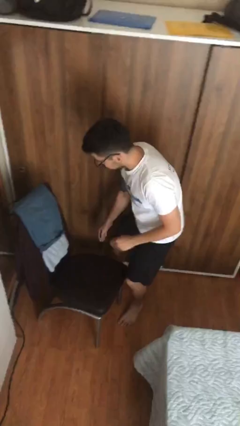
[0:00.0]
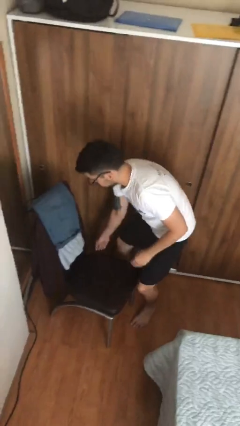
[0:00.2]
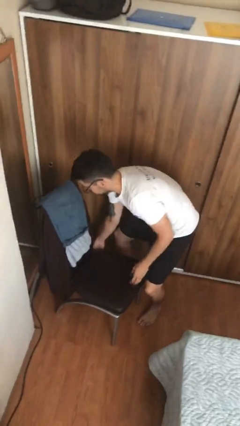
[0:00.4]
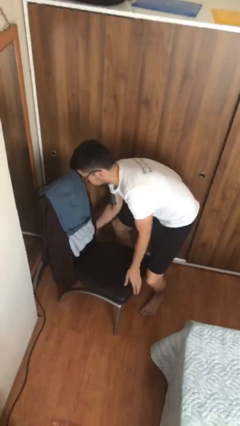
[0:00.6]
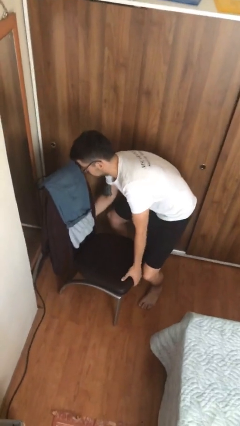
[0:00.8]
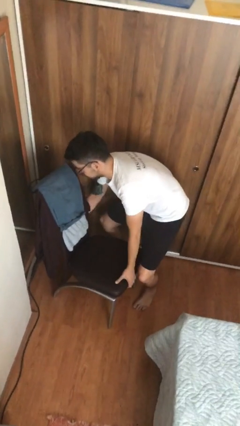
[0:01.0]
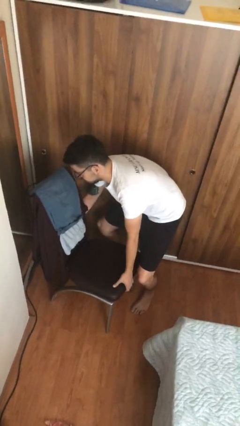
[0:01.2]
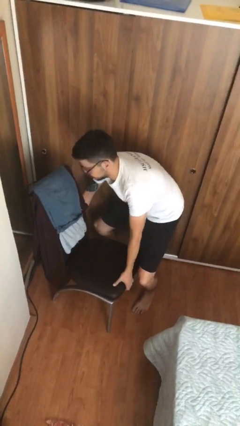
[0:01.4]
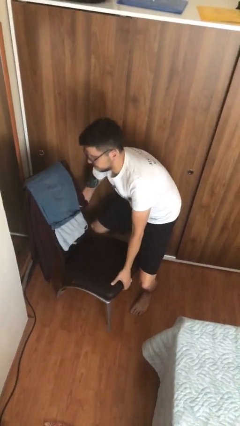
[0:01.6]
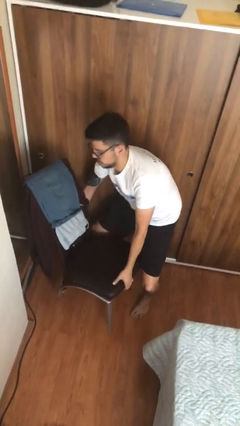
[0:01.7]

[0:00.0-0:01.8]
person picks up object from floor

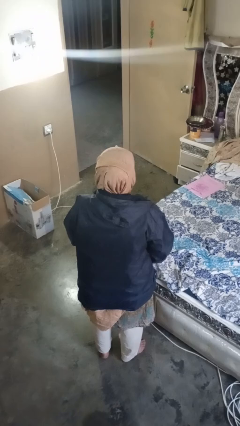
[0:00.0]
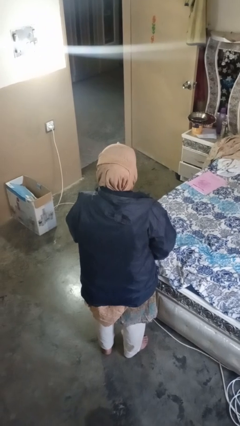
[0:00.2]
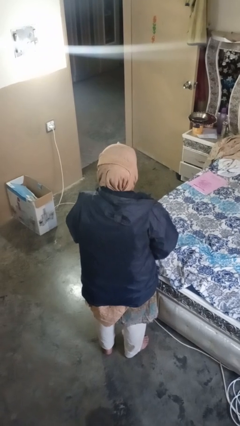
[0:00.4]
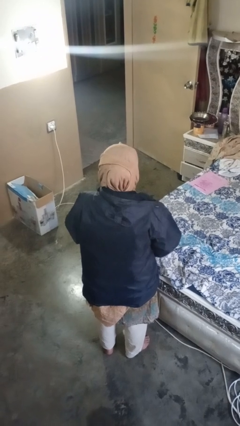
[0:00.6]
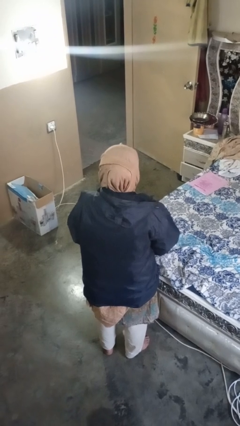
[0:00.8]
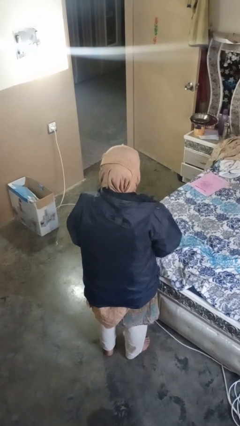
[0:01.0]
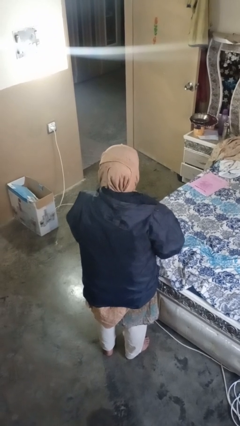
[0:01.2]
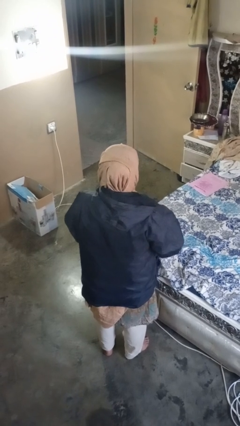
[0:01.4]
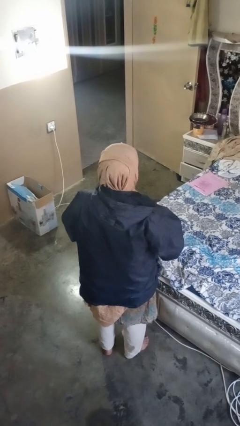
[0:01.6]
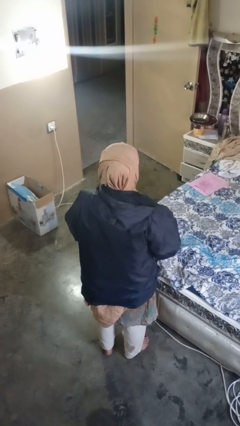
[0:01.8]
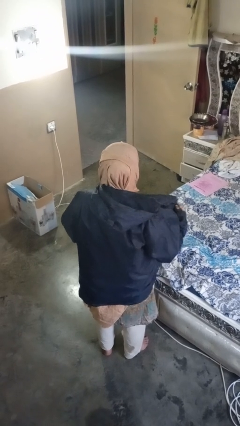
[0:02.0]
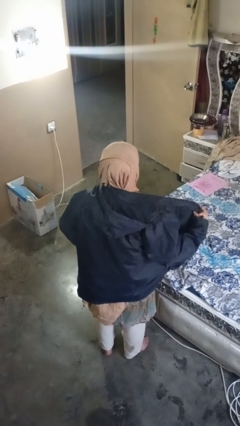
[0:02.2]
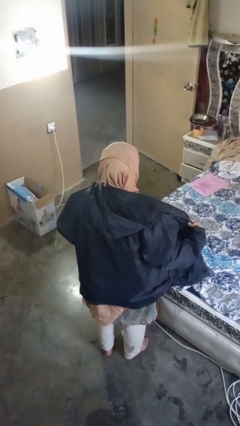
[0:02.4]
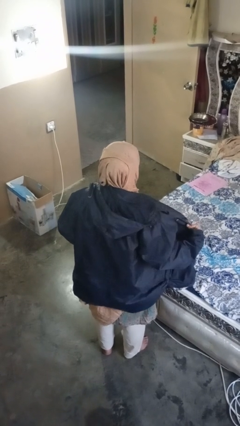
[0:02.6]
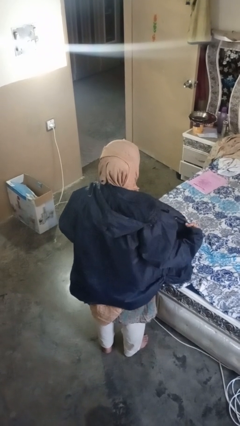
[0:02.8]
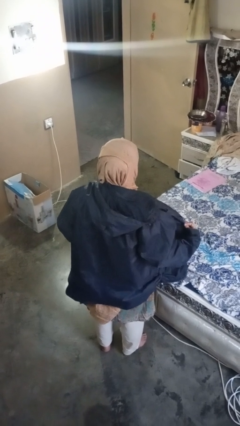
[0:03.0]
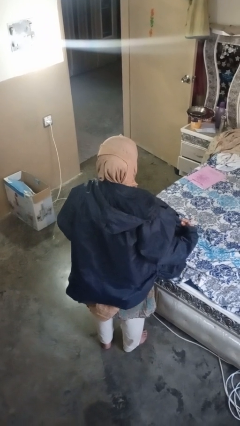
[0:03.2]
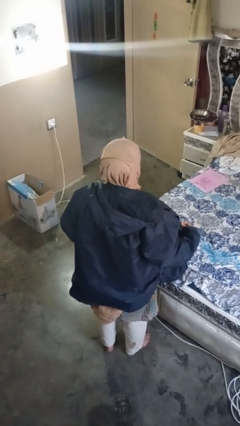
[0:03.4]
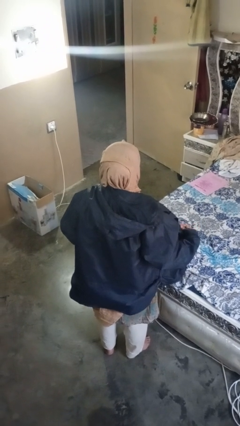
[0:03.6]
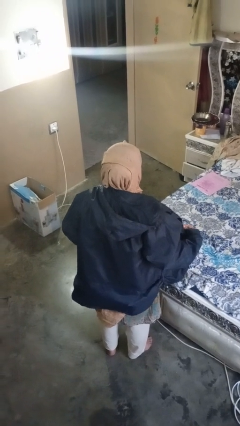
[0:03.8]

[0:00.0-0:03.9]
person unzips jacket

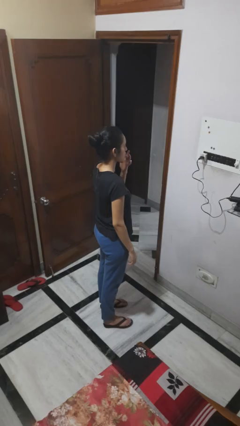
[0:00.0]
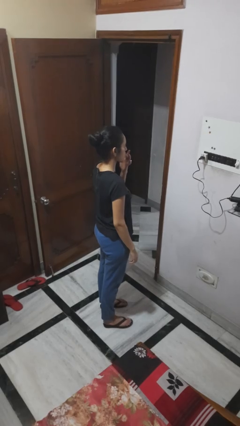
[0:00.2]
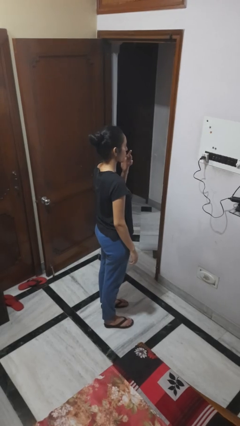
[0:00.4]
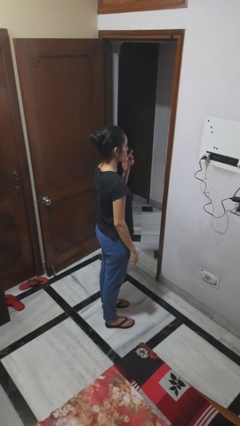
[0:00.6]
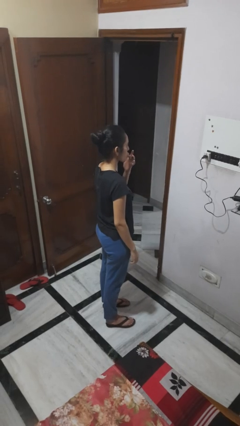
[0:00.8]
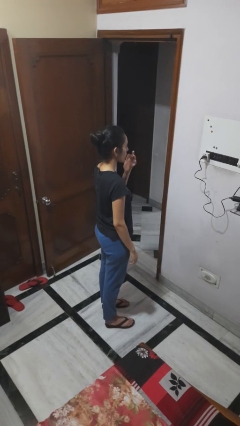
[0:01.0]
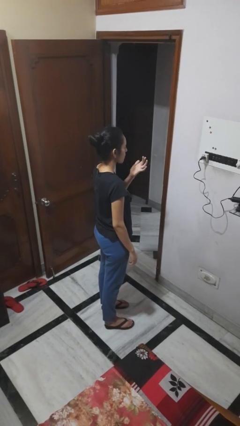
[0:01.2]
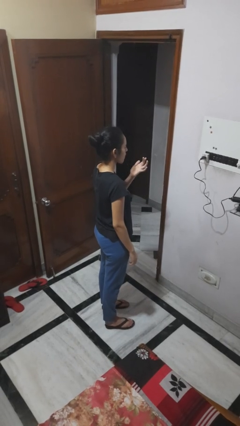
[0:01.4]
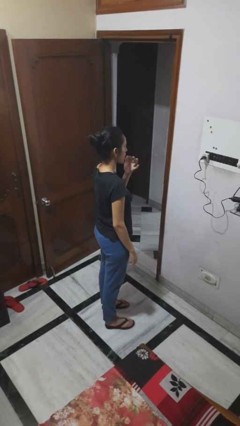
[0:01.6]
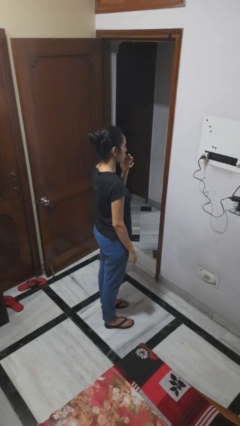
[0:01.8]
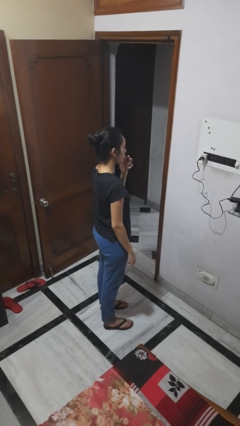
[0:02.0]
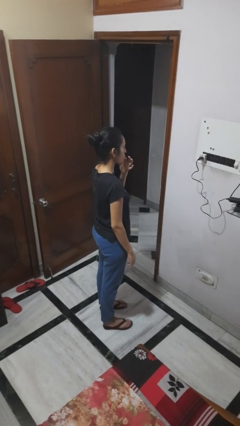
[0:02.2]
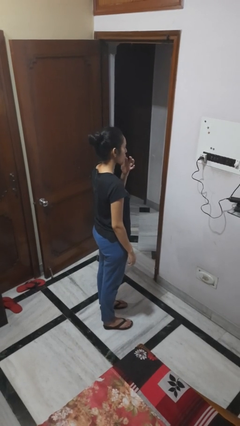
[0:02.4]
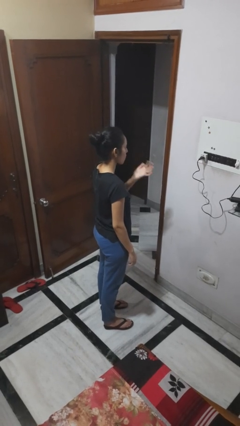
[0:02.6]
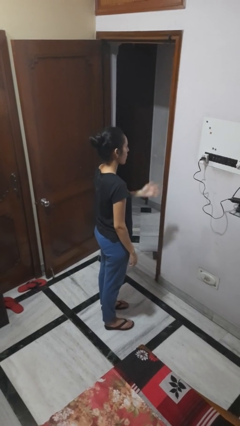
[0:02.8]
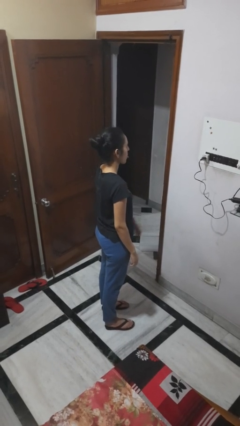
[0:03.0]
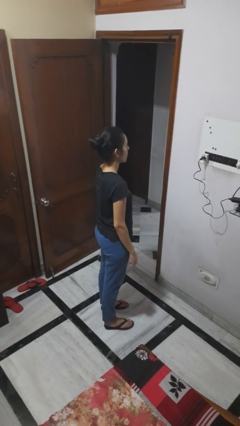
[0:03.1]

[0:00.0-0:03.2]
person licks fingers

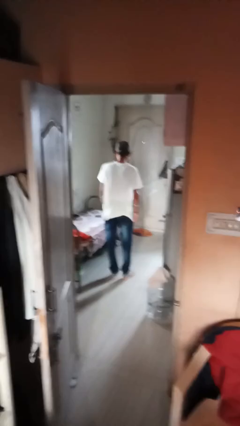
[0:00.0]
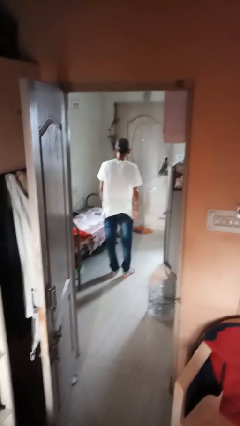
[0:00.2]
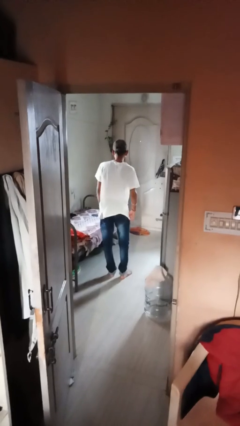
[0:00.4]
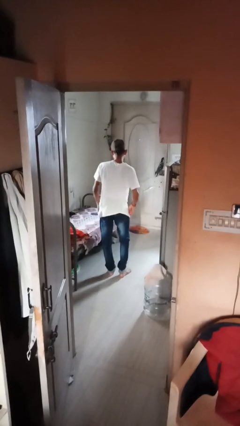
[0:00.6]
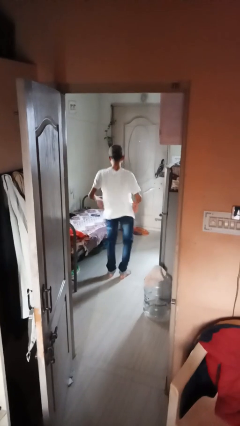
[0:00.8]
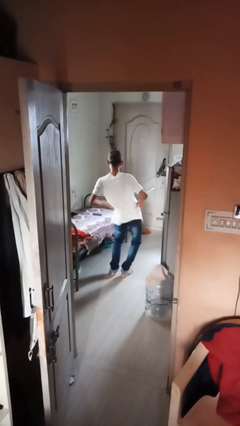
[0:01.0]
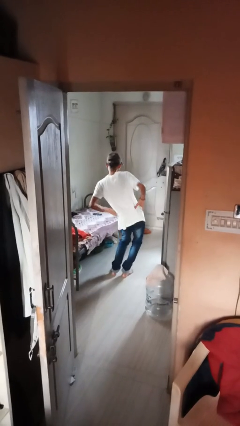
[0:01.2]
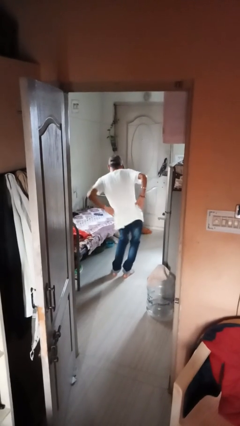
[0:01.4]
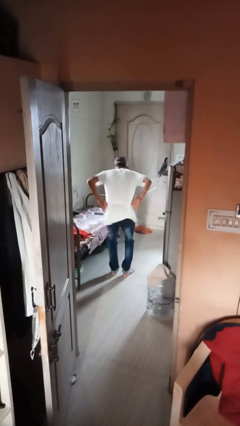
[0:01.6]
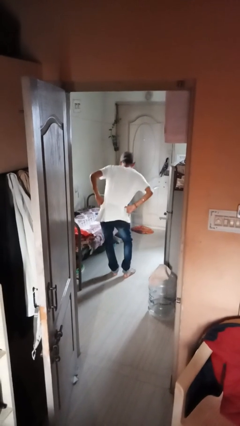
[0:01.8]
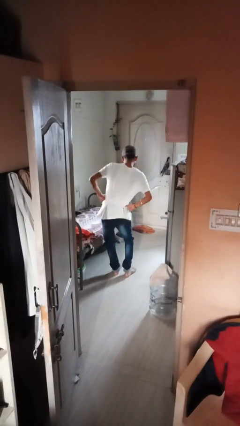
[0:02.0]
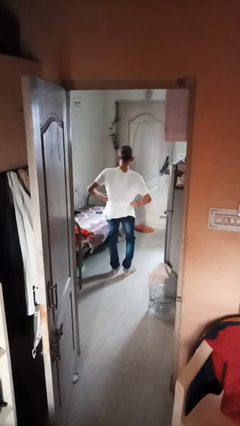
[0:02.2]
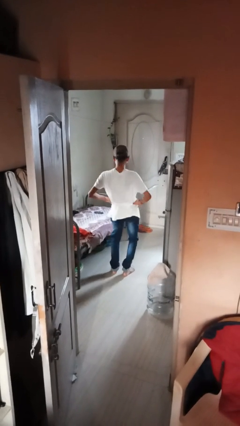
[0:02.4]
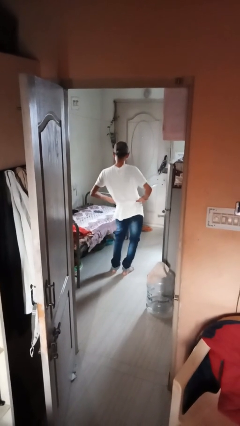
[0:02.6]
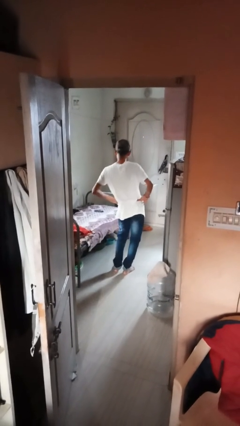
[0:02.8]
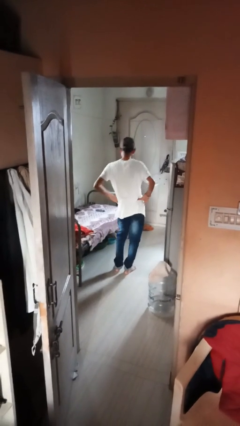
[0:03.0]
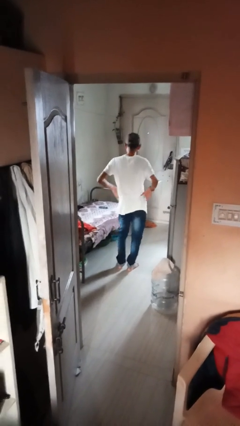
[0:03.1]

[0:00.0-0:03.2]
person wiggles hips

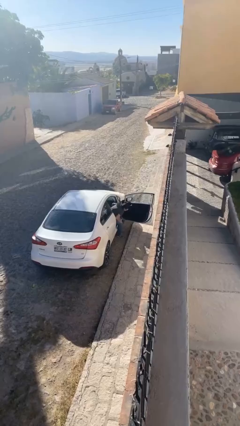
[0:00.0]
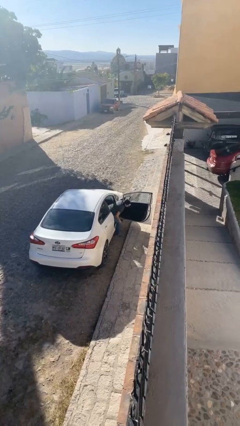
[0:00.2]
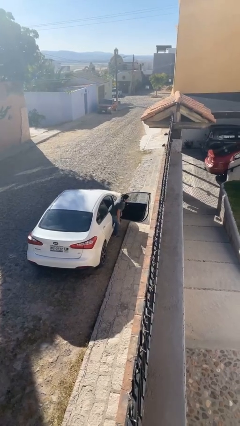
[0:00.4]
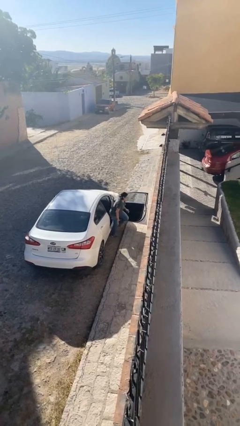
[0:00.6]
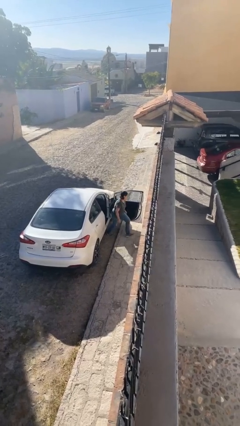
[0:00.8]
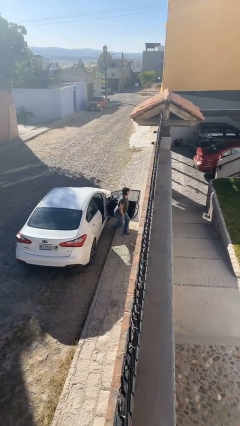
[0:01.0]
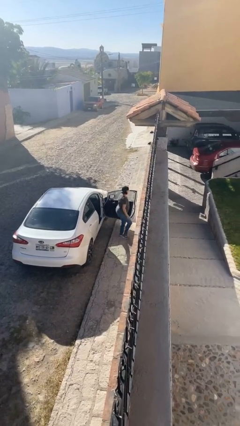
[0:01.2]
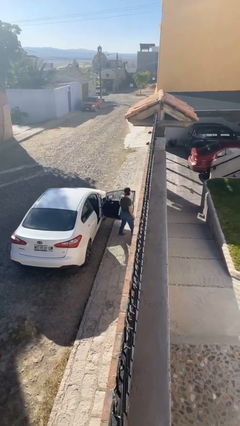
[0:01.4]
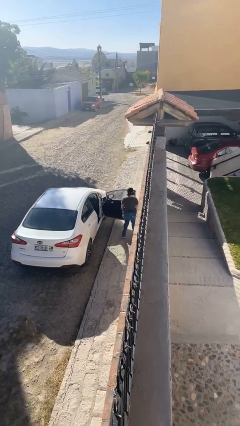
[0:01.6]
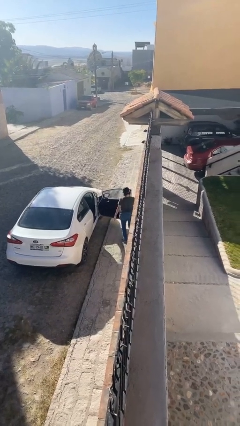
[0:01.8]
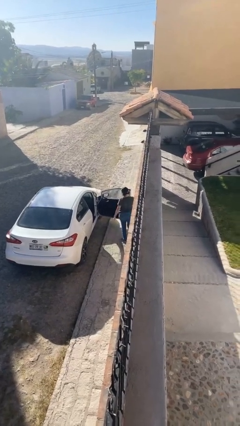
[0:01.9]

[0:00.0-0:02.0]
person exits car

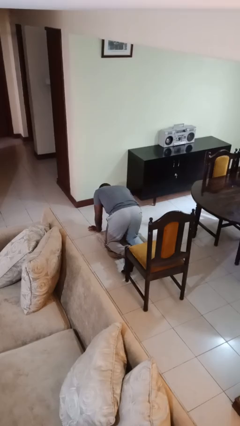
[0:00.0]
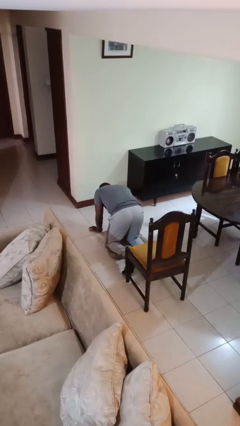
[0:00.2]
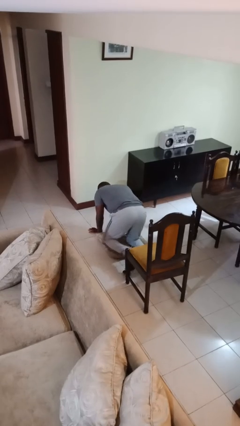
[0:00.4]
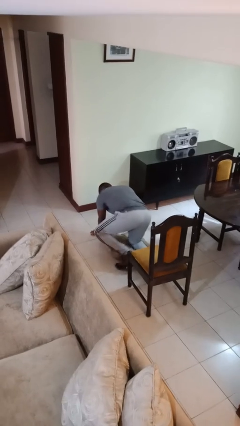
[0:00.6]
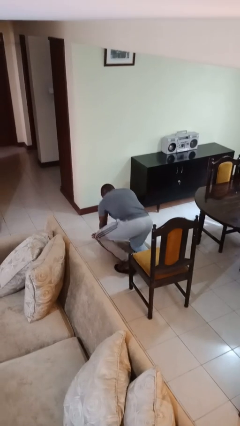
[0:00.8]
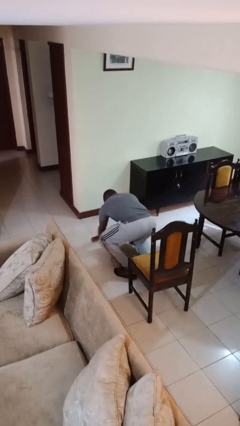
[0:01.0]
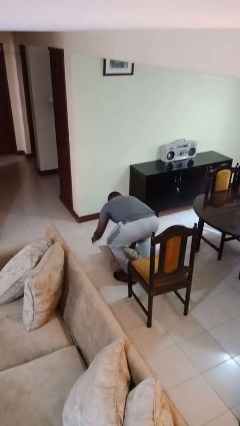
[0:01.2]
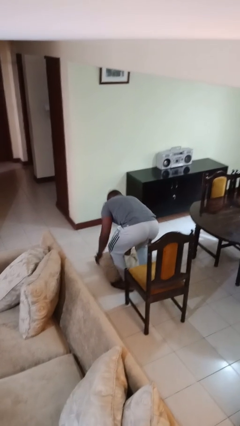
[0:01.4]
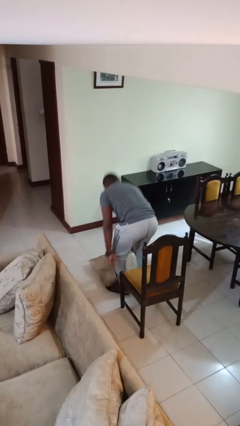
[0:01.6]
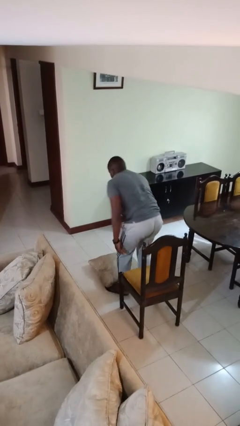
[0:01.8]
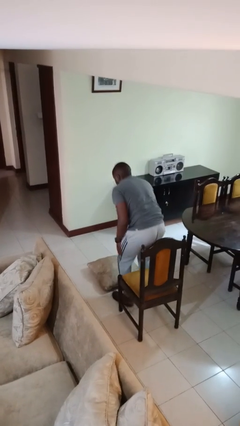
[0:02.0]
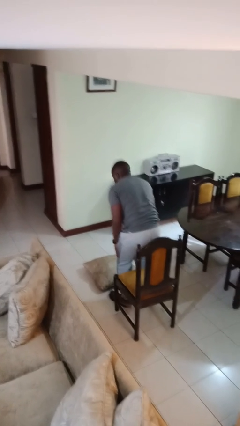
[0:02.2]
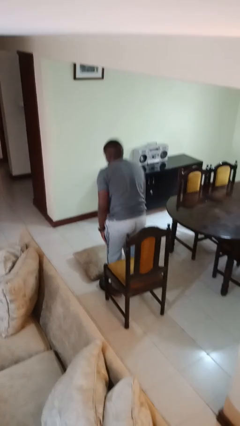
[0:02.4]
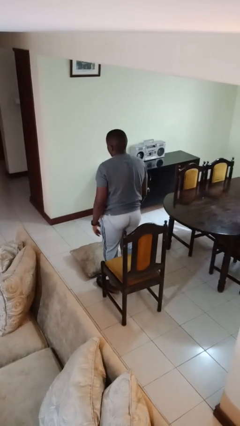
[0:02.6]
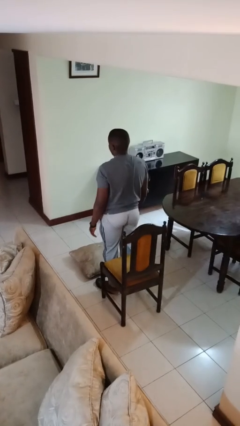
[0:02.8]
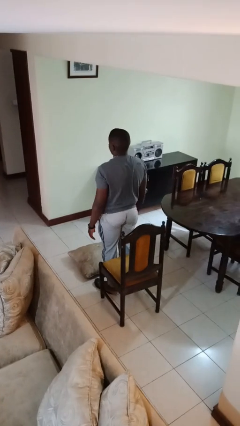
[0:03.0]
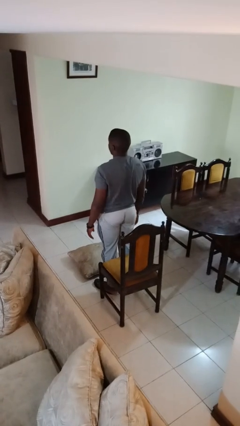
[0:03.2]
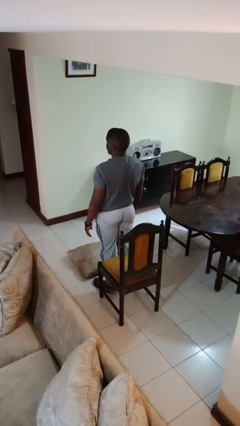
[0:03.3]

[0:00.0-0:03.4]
person stands up from floor

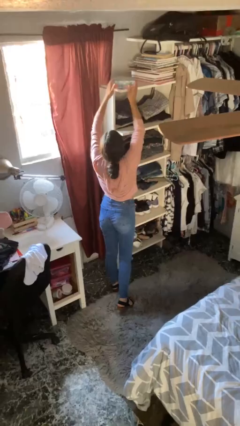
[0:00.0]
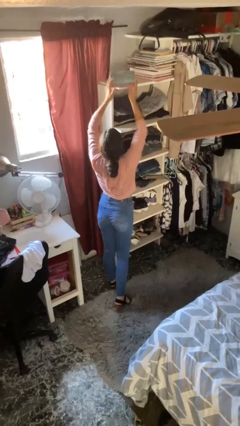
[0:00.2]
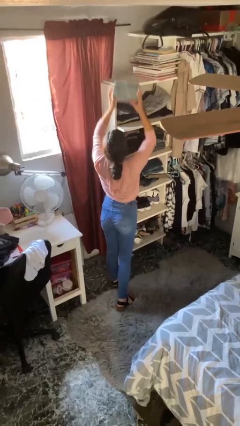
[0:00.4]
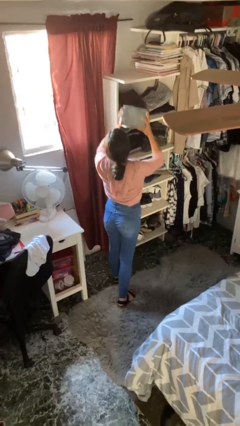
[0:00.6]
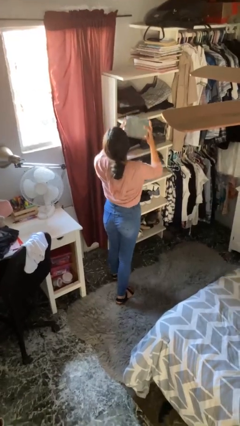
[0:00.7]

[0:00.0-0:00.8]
person picks up object from shelf
